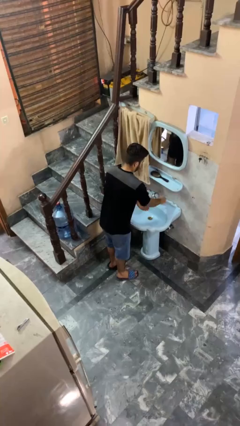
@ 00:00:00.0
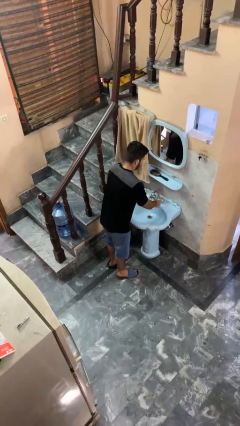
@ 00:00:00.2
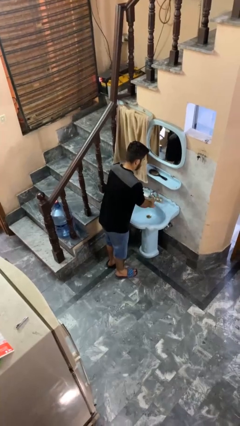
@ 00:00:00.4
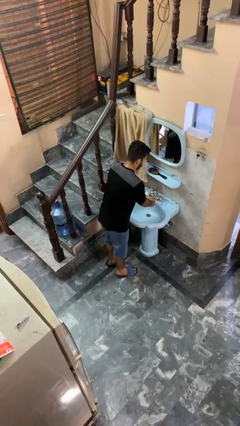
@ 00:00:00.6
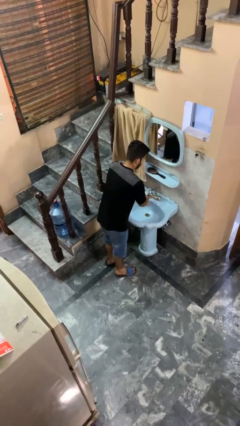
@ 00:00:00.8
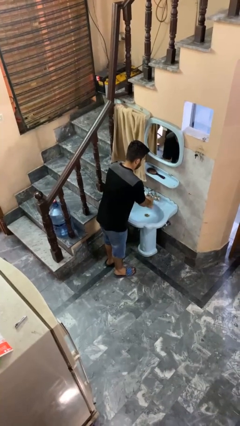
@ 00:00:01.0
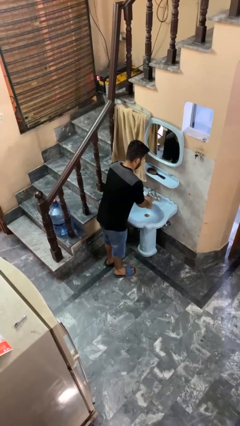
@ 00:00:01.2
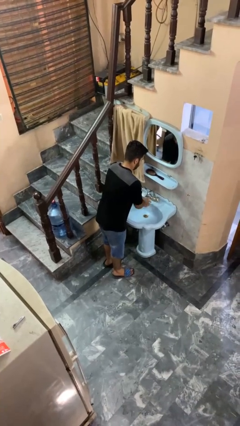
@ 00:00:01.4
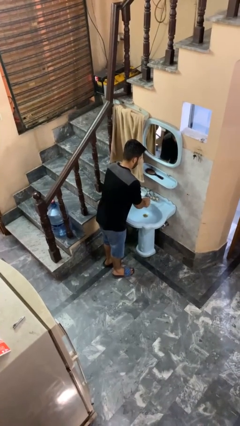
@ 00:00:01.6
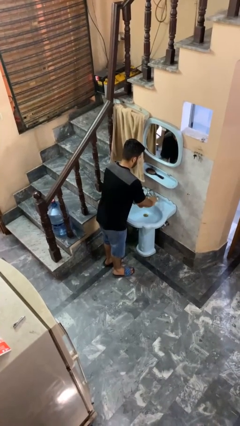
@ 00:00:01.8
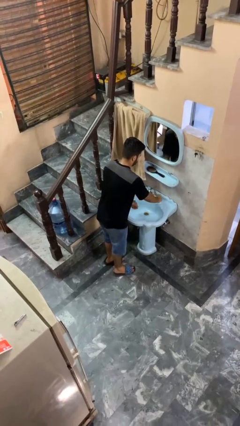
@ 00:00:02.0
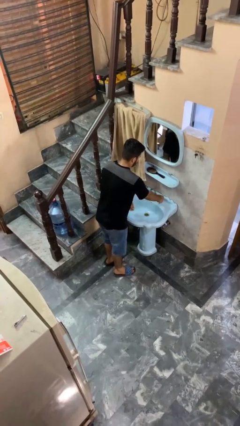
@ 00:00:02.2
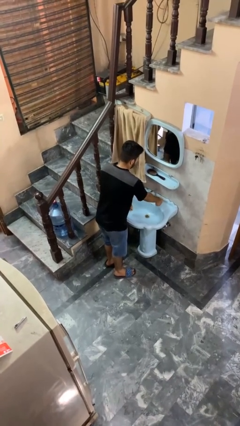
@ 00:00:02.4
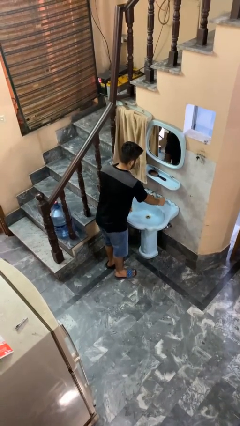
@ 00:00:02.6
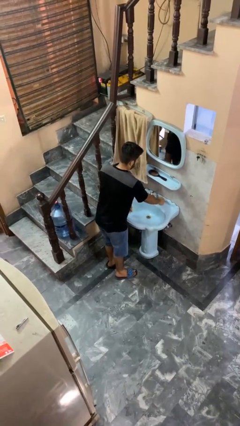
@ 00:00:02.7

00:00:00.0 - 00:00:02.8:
person washes hands

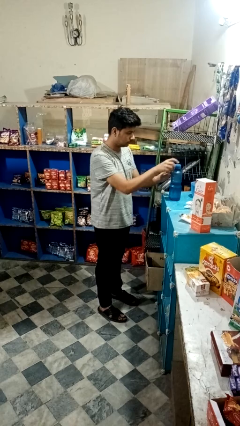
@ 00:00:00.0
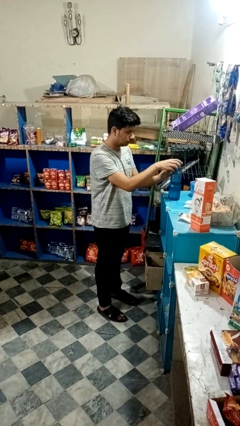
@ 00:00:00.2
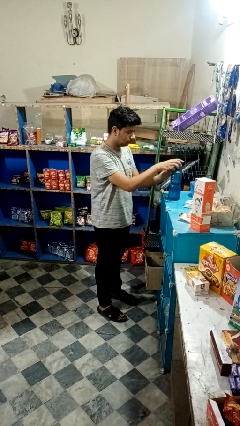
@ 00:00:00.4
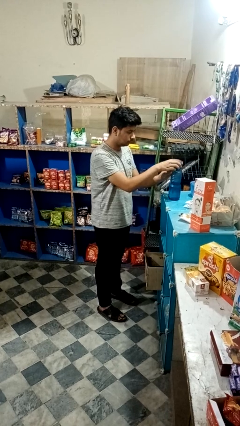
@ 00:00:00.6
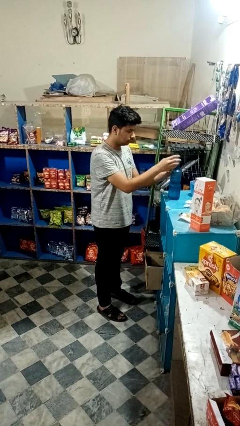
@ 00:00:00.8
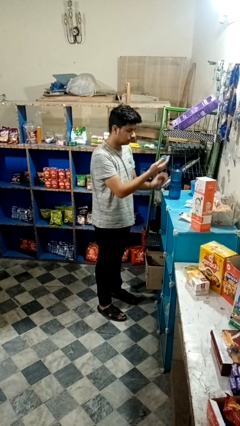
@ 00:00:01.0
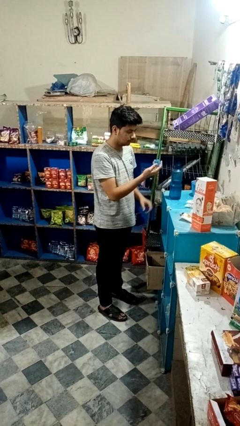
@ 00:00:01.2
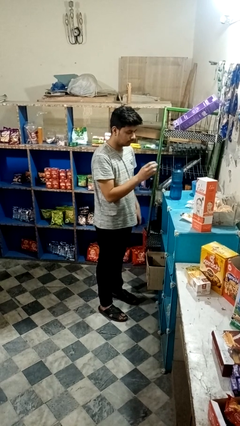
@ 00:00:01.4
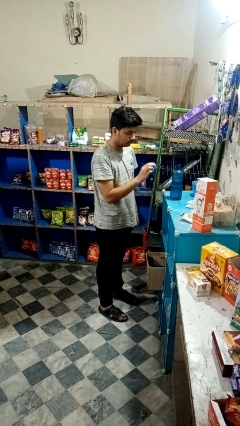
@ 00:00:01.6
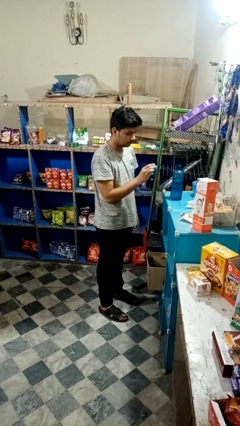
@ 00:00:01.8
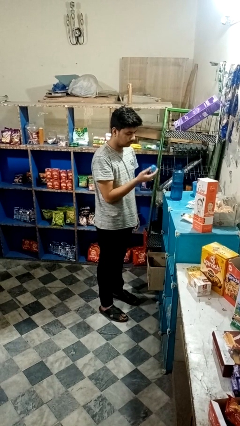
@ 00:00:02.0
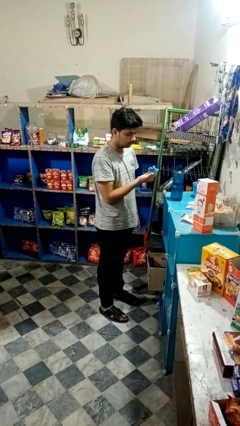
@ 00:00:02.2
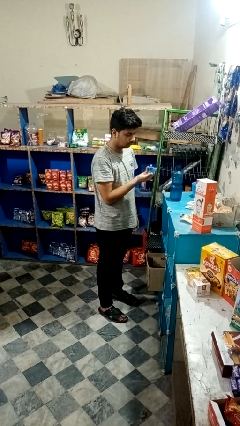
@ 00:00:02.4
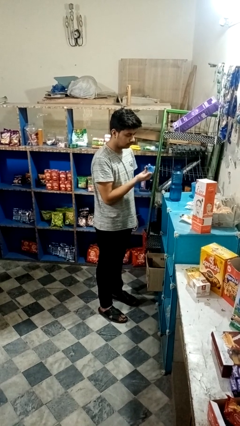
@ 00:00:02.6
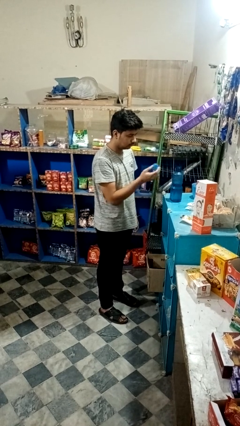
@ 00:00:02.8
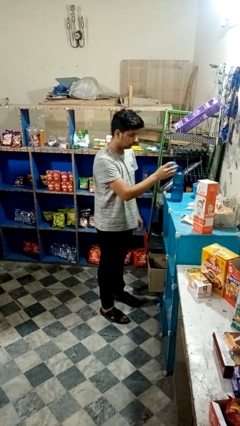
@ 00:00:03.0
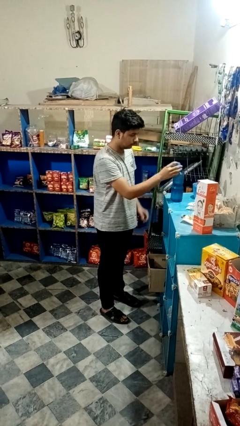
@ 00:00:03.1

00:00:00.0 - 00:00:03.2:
person unscrews lid from bottle

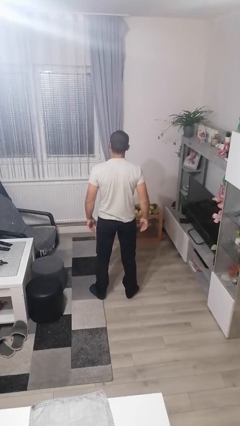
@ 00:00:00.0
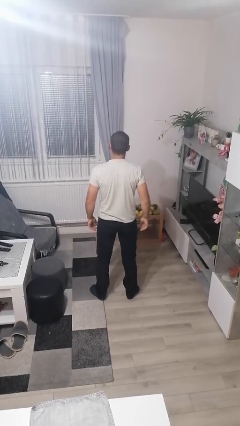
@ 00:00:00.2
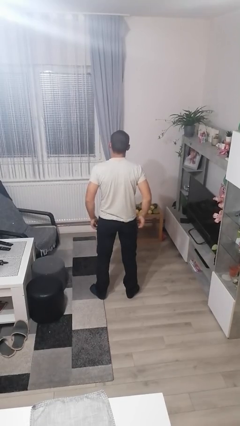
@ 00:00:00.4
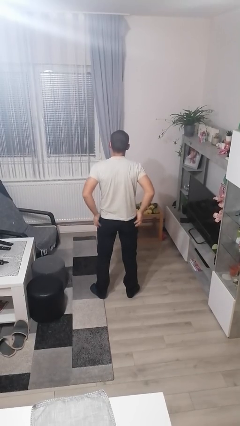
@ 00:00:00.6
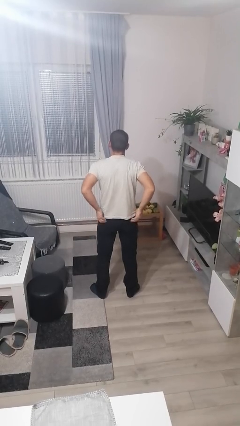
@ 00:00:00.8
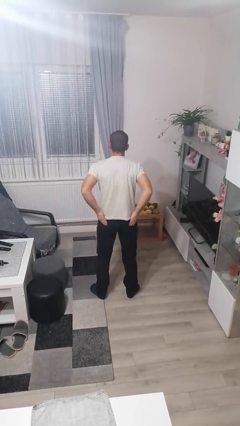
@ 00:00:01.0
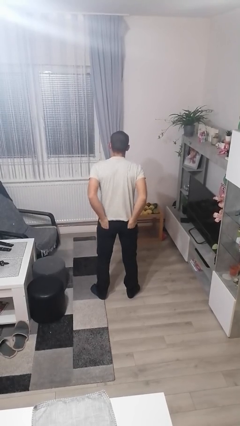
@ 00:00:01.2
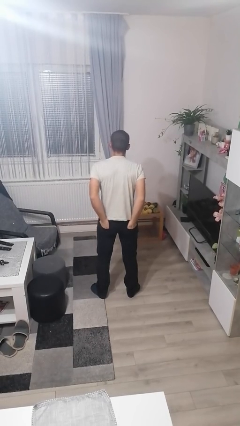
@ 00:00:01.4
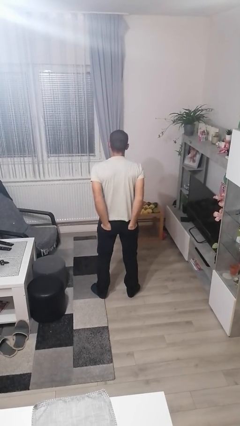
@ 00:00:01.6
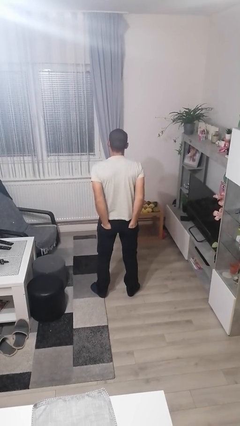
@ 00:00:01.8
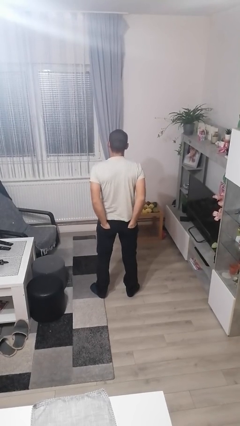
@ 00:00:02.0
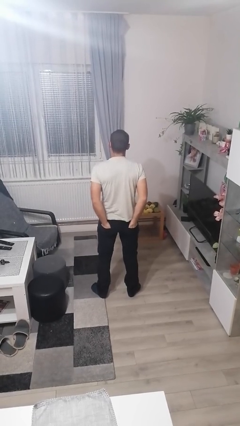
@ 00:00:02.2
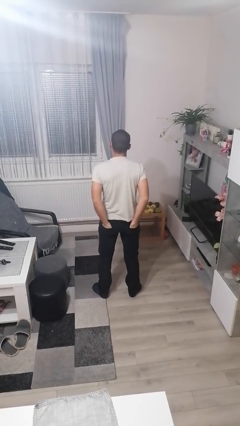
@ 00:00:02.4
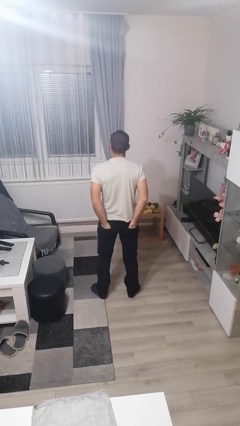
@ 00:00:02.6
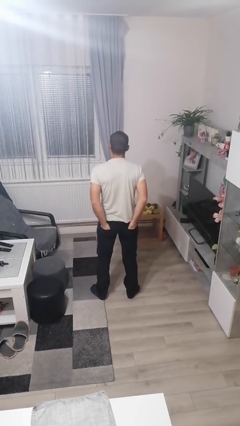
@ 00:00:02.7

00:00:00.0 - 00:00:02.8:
person puts hands in back pockets

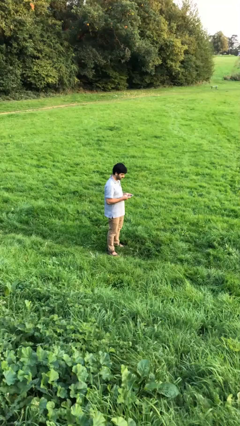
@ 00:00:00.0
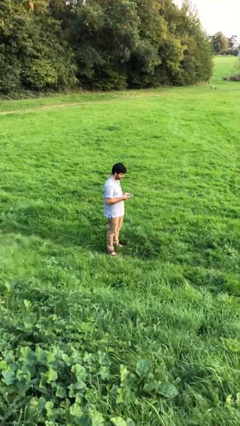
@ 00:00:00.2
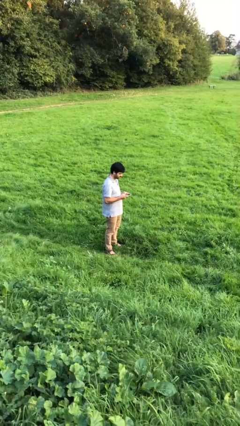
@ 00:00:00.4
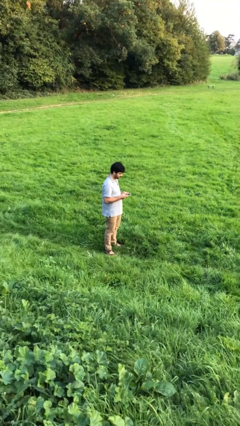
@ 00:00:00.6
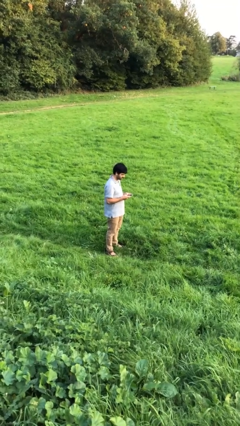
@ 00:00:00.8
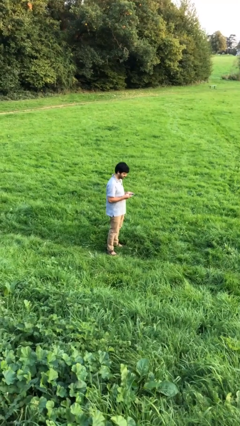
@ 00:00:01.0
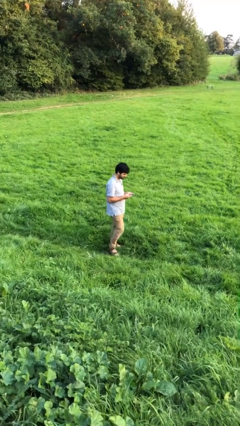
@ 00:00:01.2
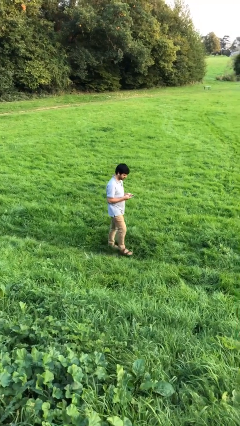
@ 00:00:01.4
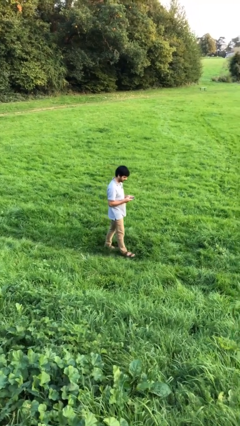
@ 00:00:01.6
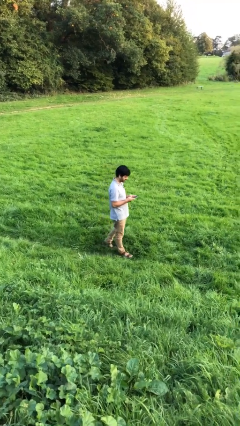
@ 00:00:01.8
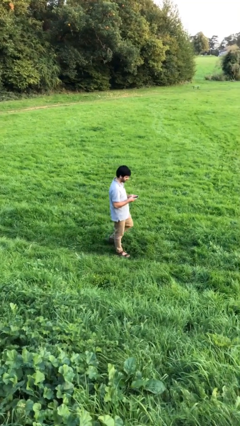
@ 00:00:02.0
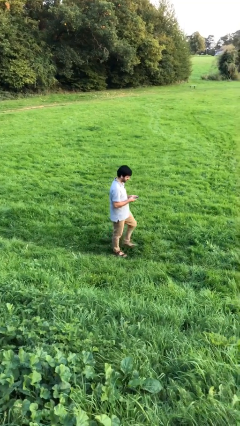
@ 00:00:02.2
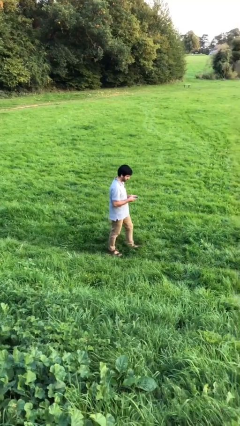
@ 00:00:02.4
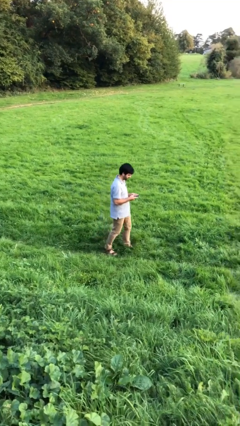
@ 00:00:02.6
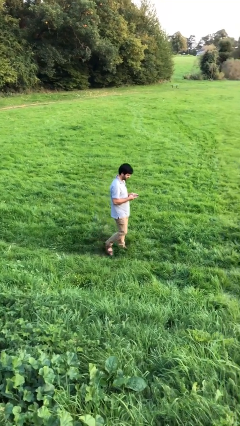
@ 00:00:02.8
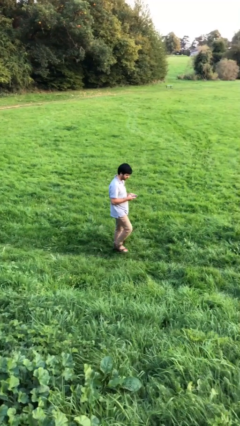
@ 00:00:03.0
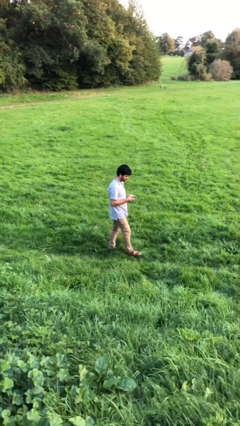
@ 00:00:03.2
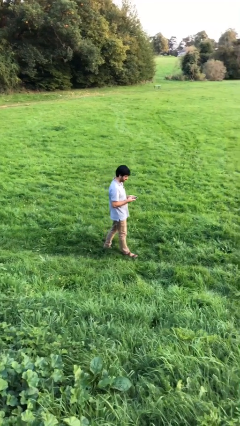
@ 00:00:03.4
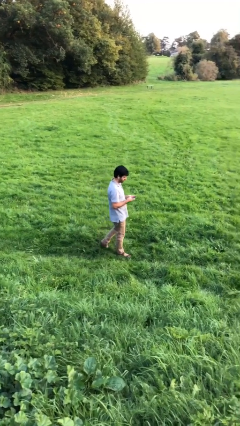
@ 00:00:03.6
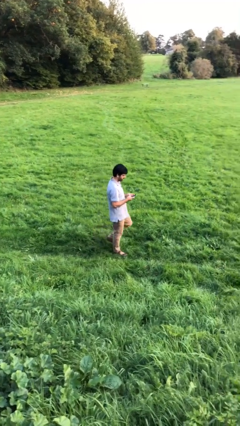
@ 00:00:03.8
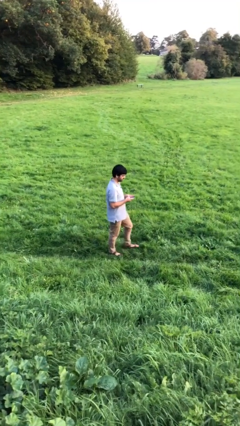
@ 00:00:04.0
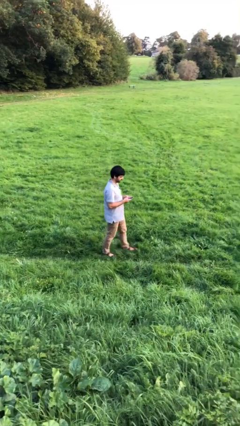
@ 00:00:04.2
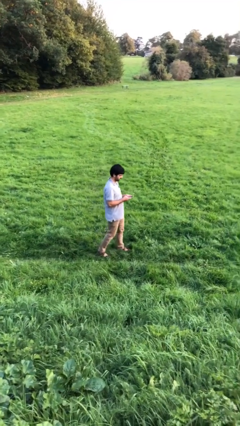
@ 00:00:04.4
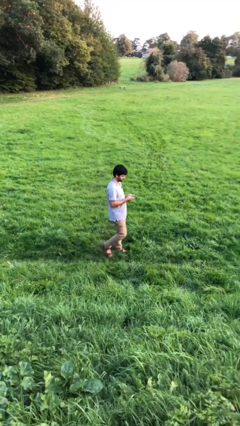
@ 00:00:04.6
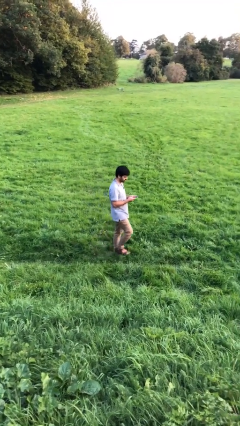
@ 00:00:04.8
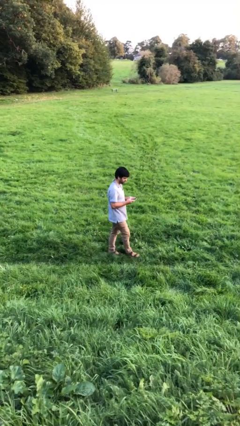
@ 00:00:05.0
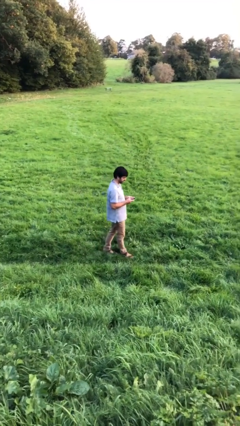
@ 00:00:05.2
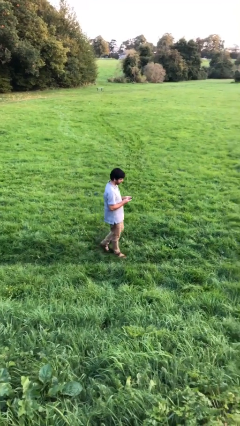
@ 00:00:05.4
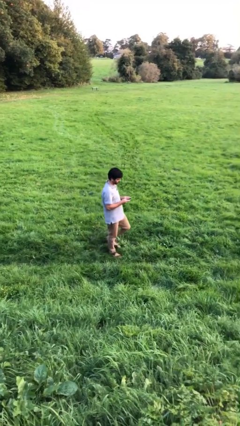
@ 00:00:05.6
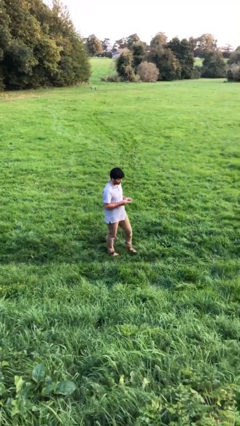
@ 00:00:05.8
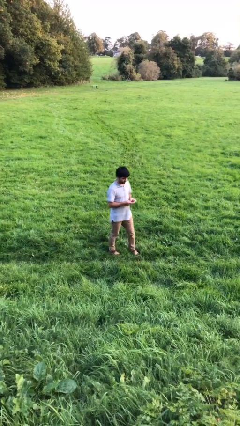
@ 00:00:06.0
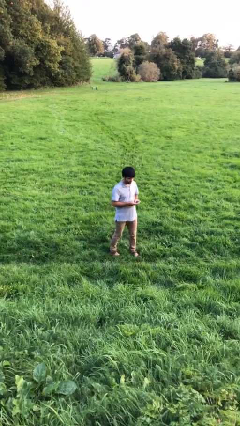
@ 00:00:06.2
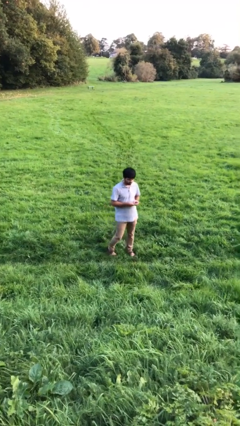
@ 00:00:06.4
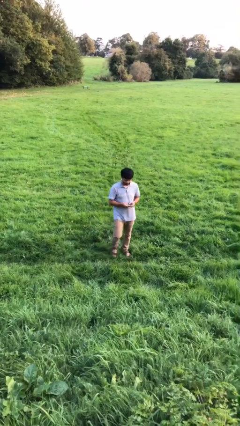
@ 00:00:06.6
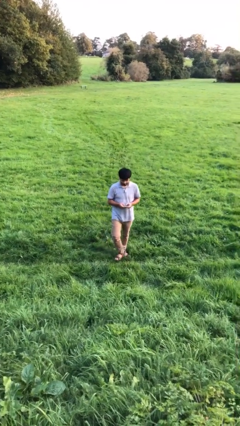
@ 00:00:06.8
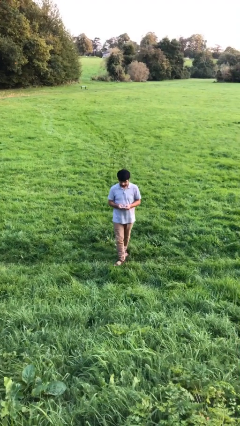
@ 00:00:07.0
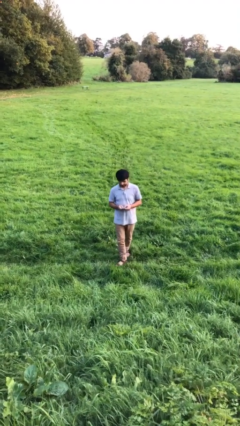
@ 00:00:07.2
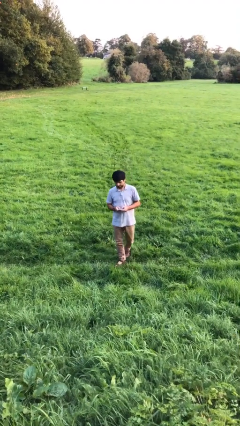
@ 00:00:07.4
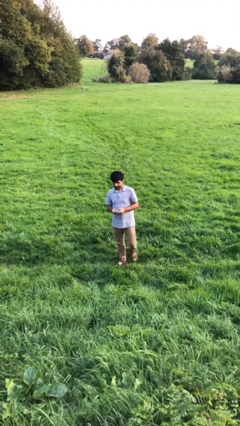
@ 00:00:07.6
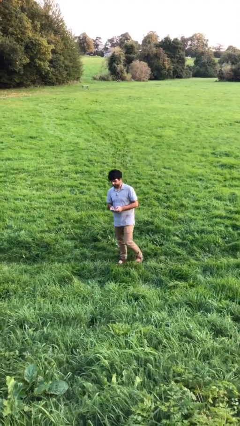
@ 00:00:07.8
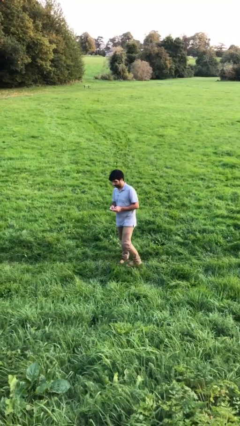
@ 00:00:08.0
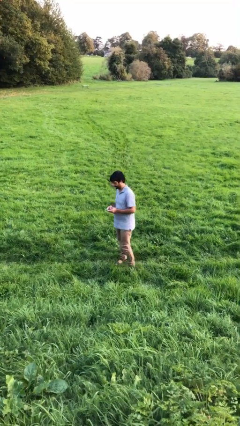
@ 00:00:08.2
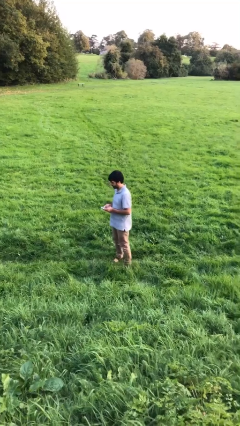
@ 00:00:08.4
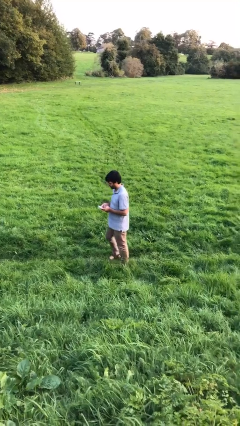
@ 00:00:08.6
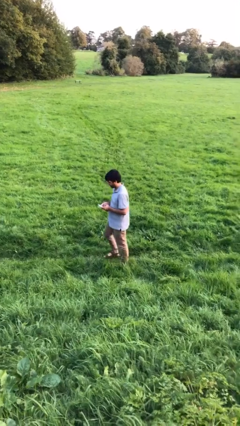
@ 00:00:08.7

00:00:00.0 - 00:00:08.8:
person texts on phone
